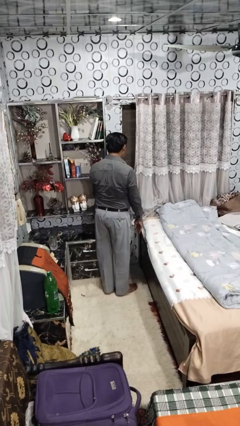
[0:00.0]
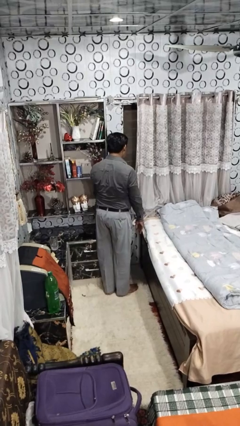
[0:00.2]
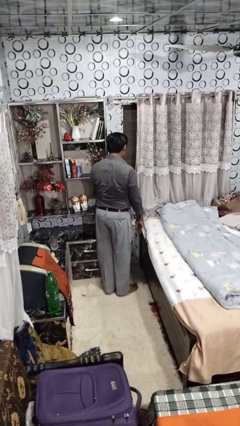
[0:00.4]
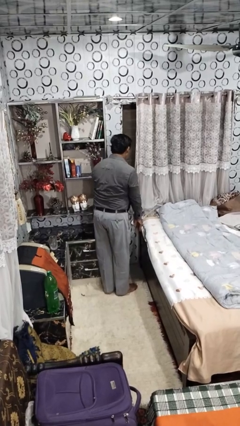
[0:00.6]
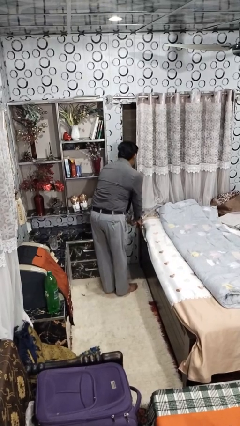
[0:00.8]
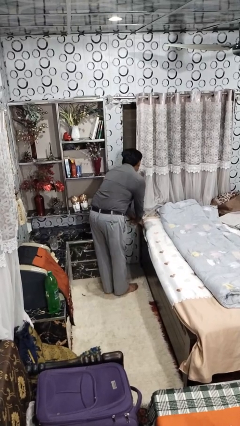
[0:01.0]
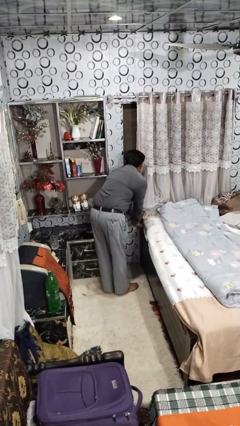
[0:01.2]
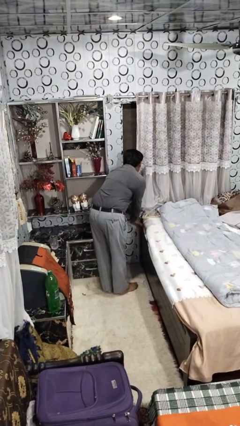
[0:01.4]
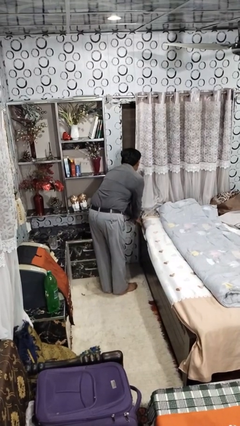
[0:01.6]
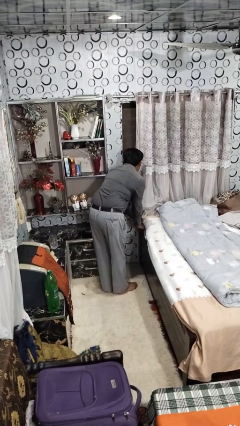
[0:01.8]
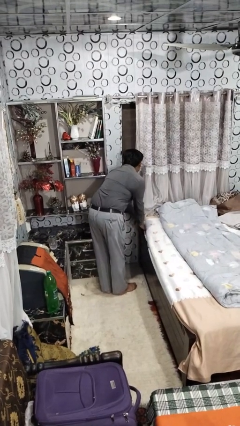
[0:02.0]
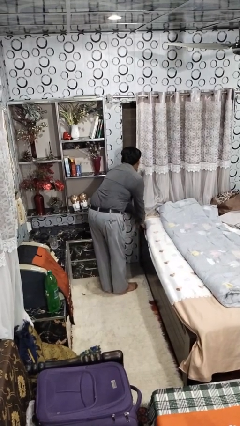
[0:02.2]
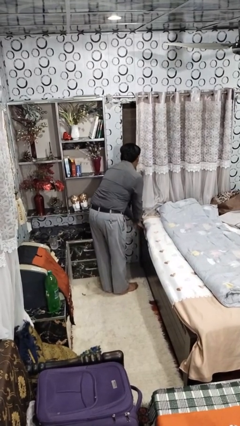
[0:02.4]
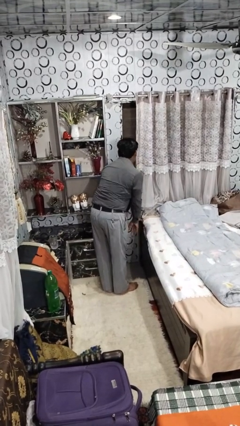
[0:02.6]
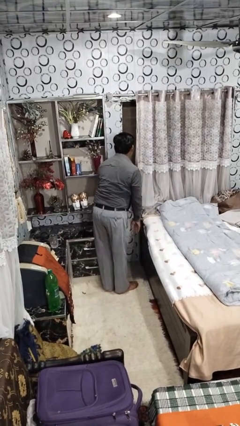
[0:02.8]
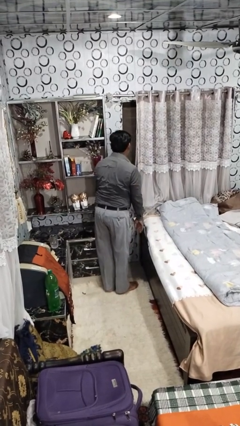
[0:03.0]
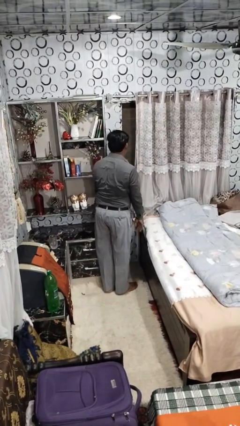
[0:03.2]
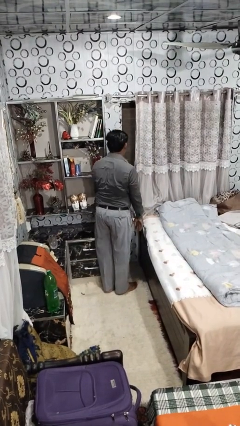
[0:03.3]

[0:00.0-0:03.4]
person makes bed

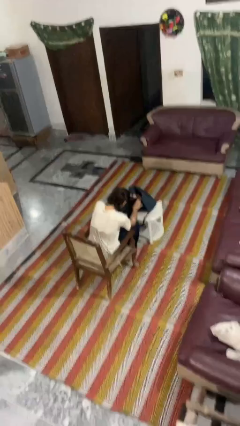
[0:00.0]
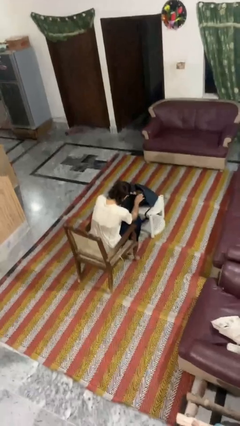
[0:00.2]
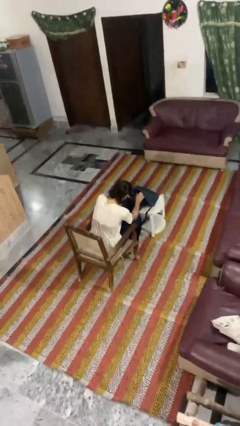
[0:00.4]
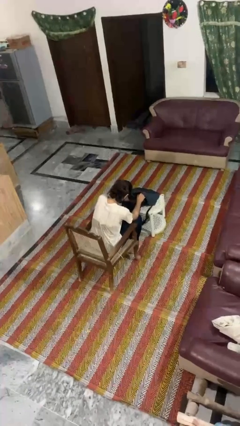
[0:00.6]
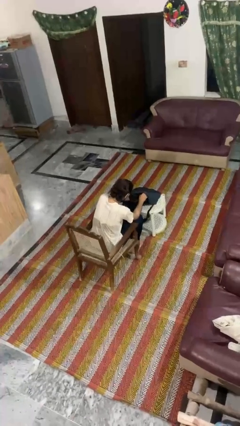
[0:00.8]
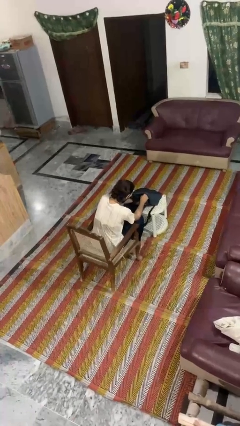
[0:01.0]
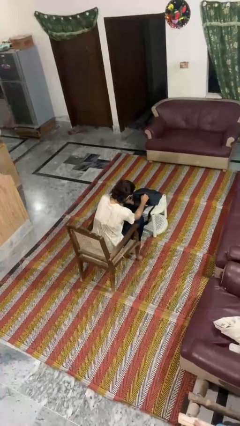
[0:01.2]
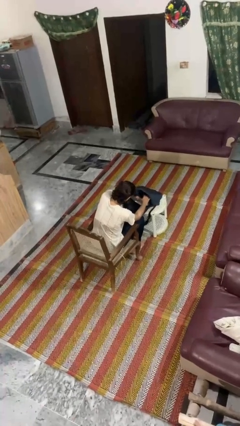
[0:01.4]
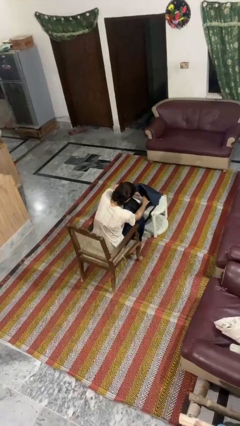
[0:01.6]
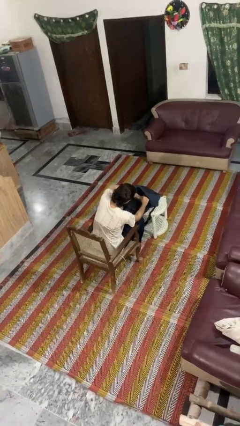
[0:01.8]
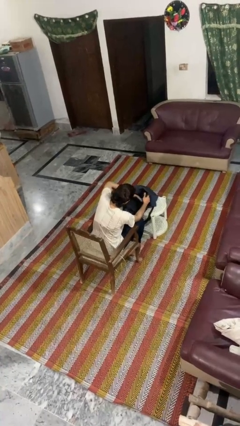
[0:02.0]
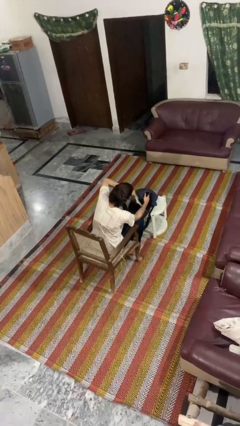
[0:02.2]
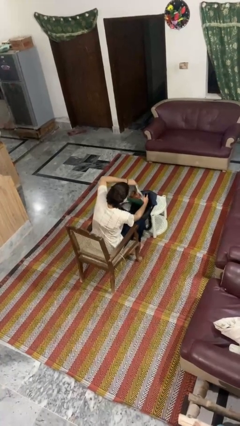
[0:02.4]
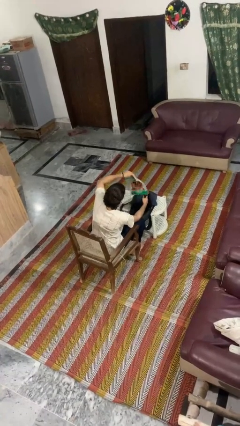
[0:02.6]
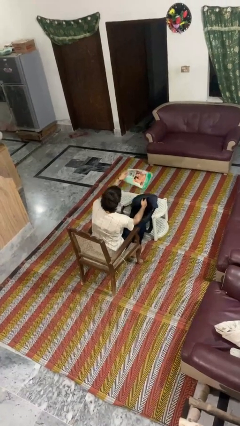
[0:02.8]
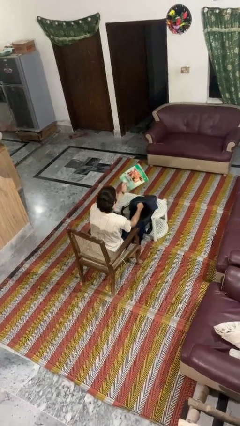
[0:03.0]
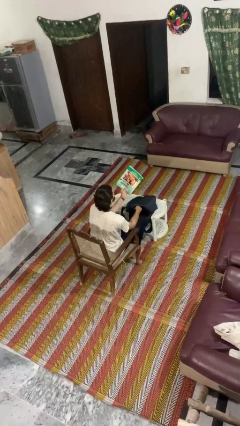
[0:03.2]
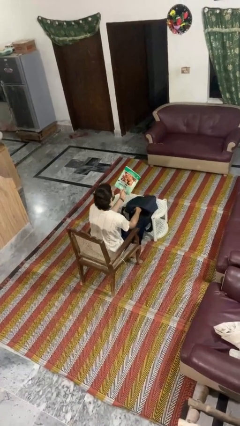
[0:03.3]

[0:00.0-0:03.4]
person takes object from backpack

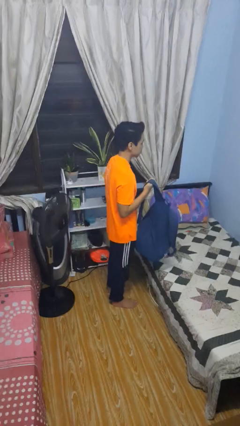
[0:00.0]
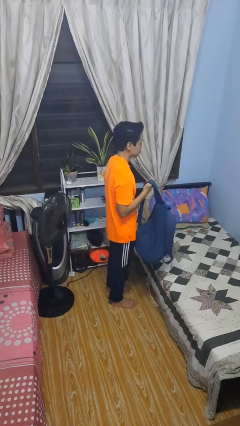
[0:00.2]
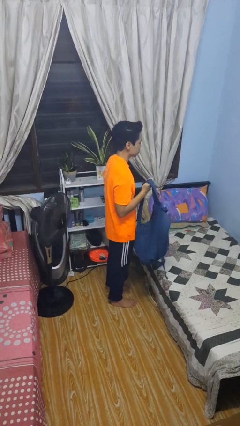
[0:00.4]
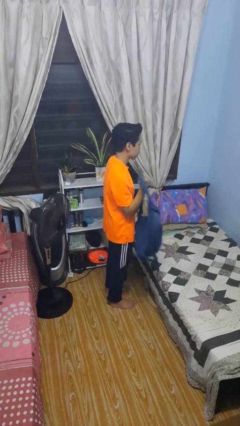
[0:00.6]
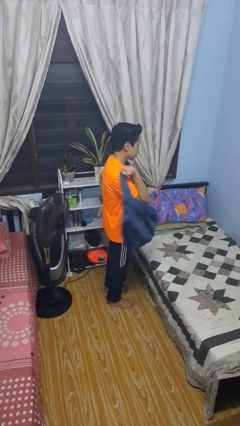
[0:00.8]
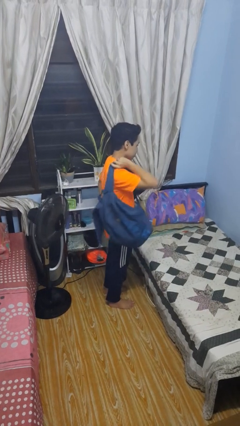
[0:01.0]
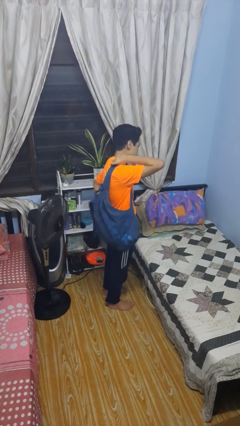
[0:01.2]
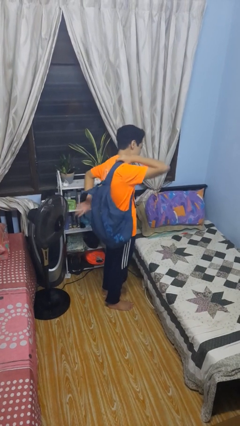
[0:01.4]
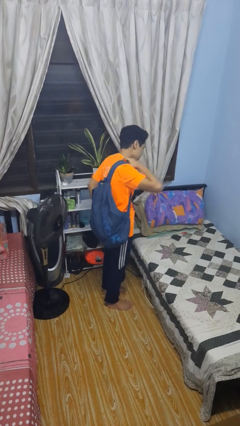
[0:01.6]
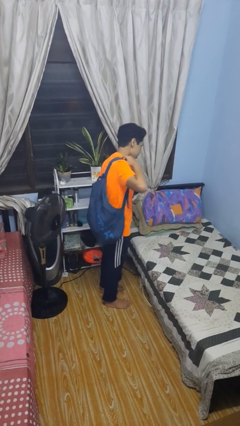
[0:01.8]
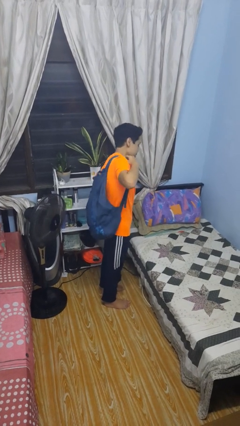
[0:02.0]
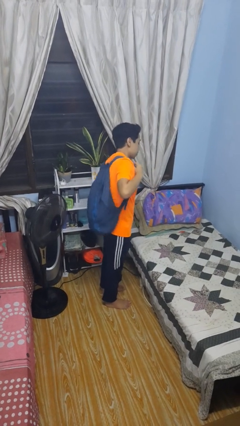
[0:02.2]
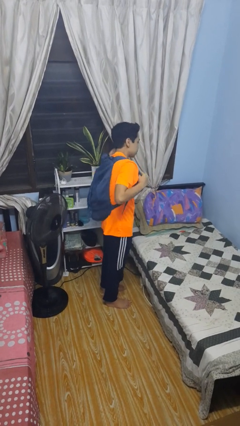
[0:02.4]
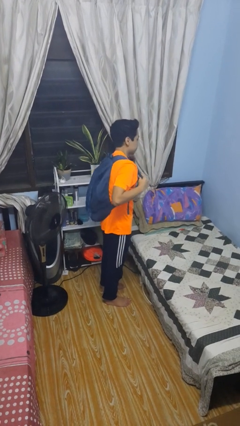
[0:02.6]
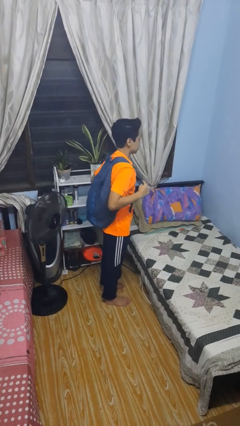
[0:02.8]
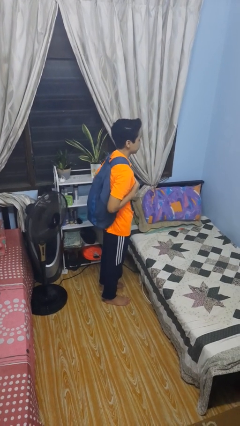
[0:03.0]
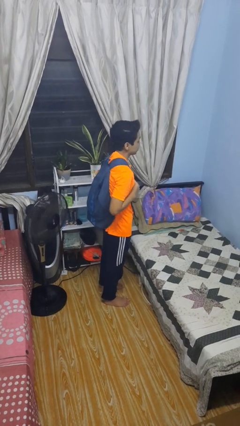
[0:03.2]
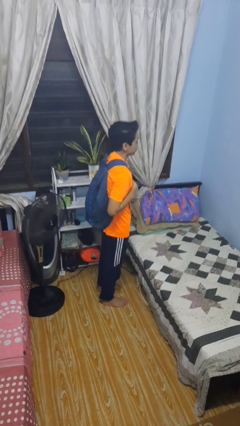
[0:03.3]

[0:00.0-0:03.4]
person puts on backpack

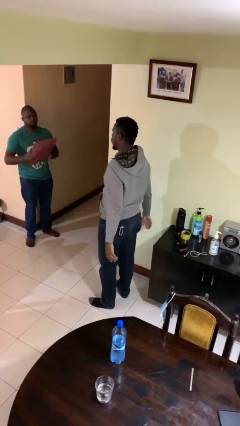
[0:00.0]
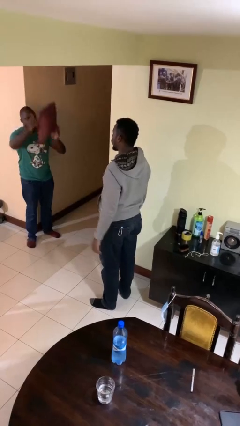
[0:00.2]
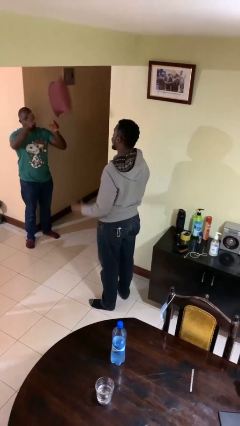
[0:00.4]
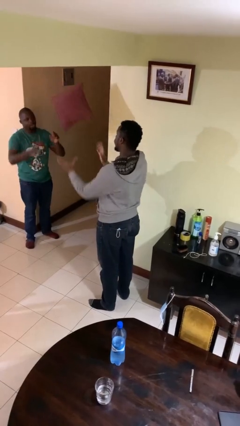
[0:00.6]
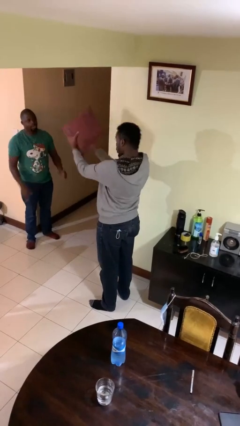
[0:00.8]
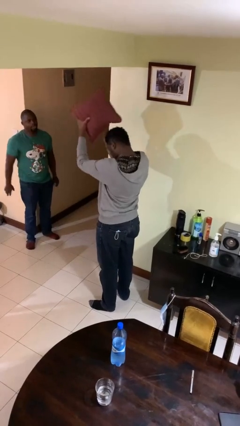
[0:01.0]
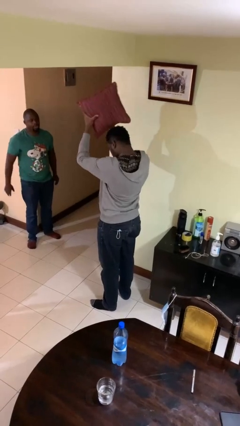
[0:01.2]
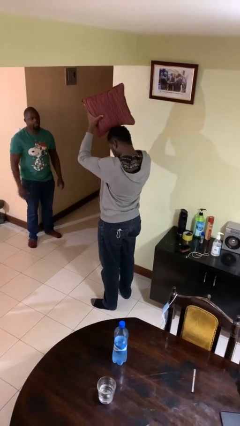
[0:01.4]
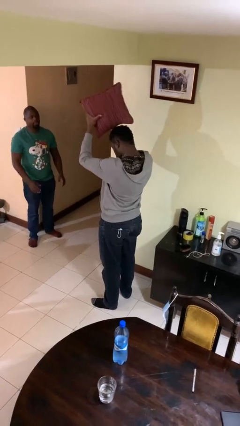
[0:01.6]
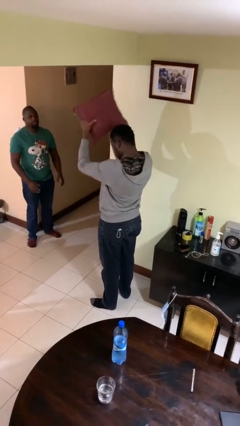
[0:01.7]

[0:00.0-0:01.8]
person catches object from person

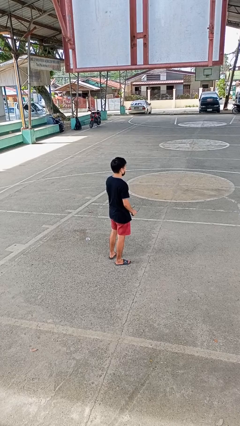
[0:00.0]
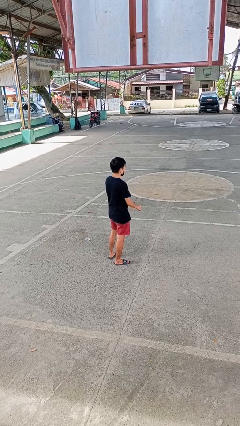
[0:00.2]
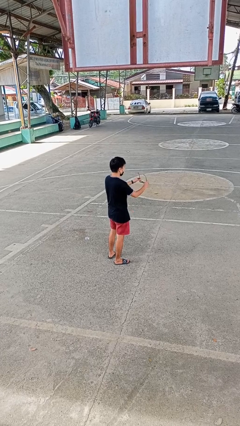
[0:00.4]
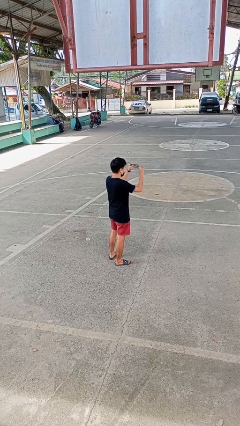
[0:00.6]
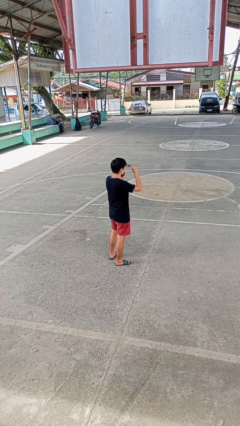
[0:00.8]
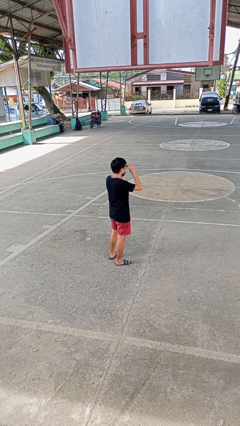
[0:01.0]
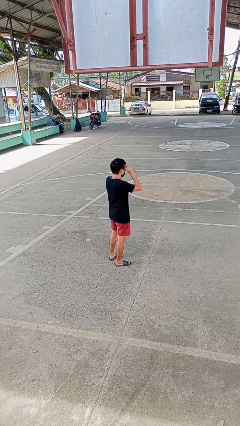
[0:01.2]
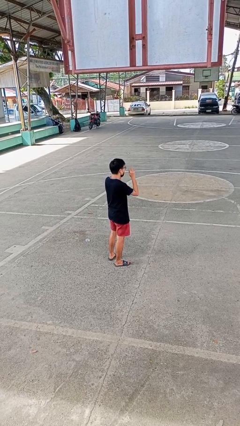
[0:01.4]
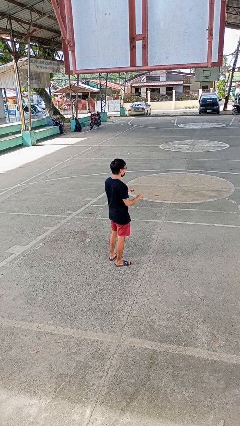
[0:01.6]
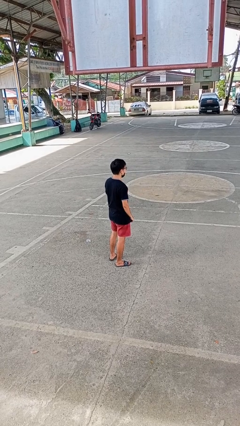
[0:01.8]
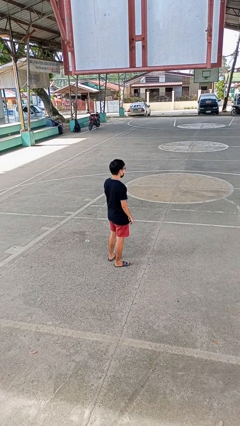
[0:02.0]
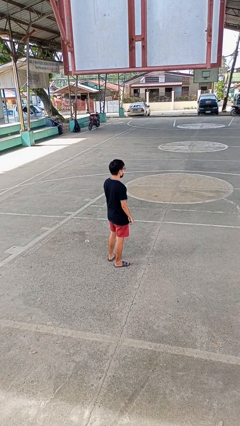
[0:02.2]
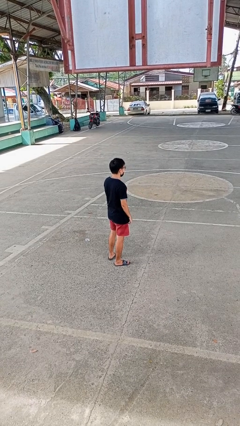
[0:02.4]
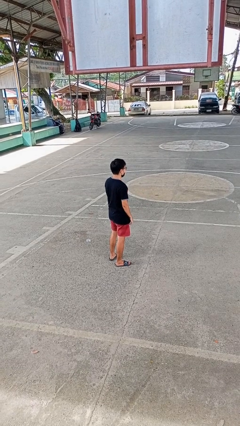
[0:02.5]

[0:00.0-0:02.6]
person puts on glasses

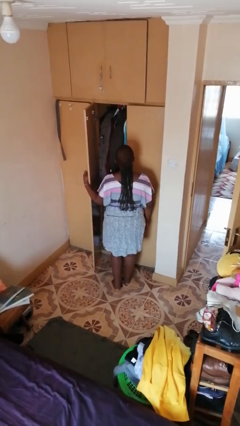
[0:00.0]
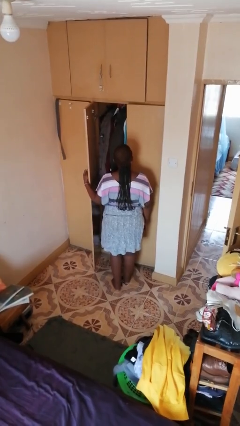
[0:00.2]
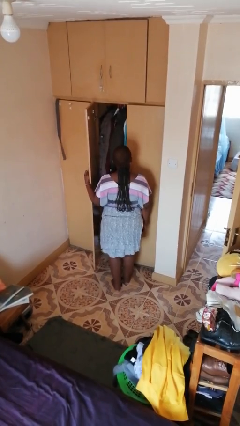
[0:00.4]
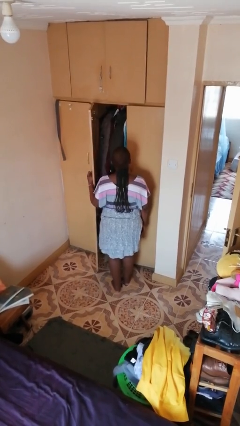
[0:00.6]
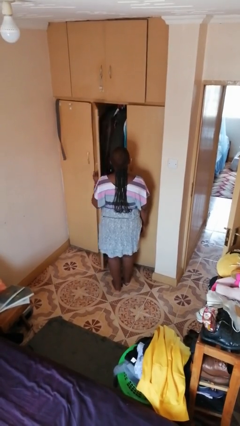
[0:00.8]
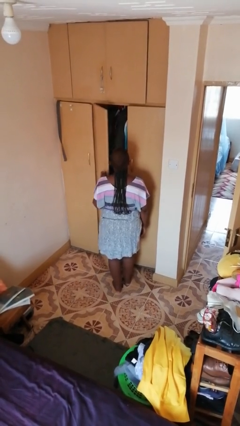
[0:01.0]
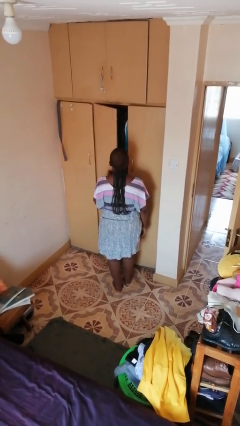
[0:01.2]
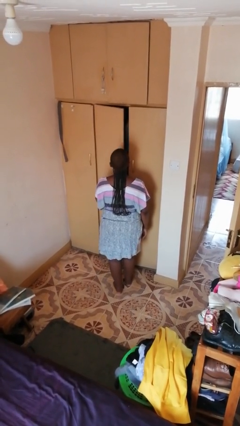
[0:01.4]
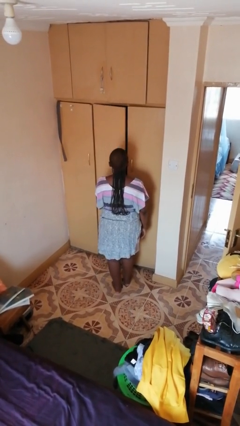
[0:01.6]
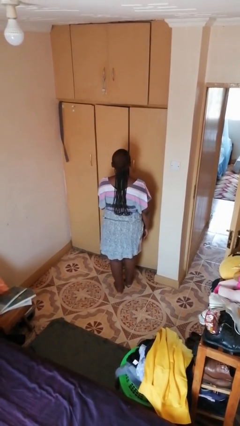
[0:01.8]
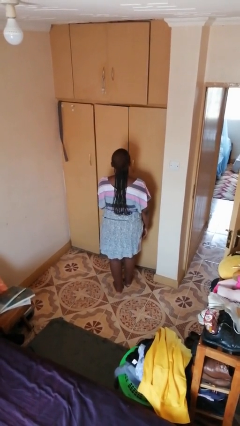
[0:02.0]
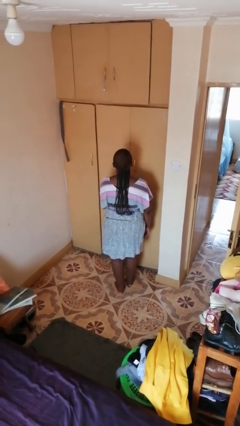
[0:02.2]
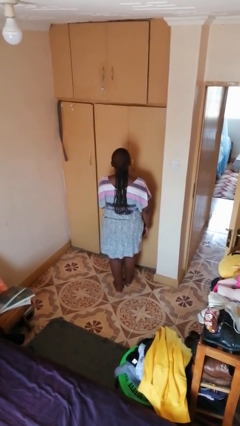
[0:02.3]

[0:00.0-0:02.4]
person closes closet door
